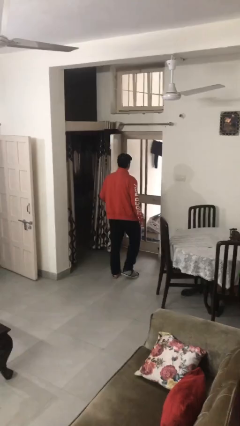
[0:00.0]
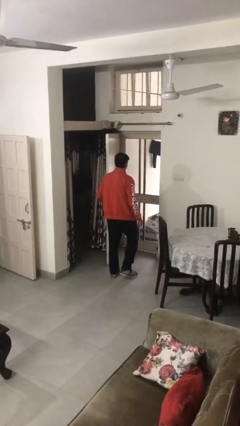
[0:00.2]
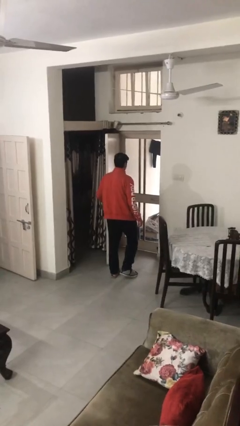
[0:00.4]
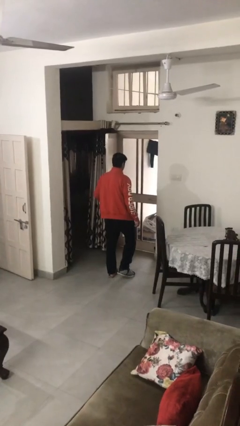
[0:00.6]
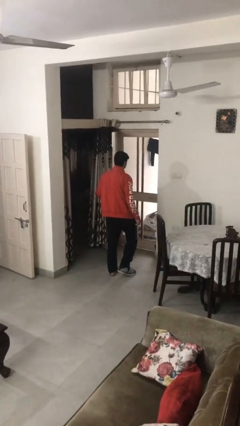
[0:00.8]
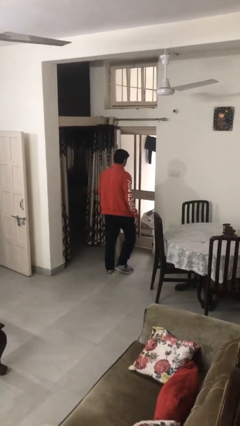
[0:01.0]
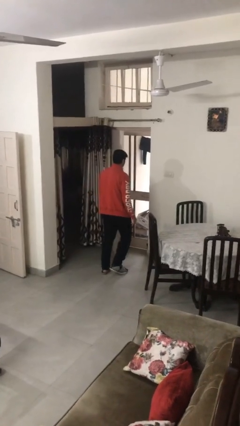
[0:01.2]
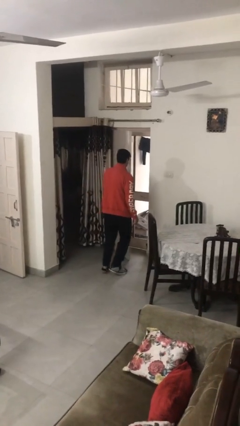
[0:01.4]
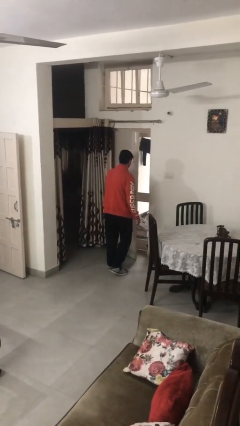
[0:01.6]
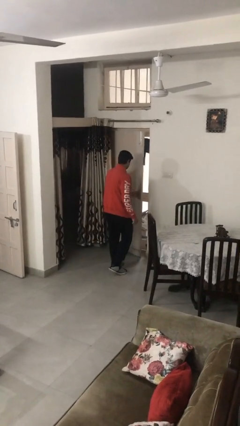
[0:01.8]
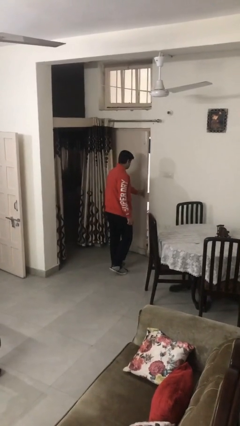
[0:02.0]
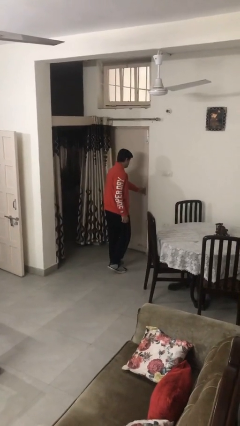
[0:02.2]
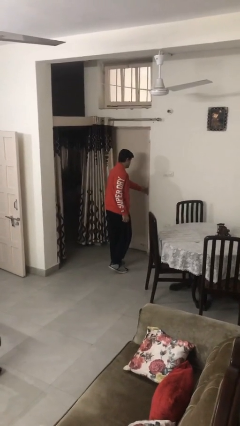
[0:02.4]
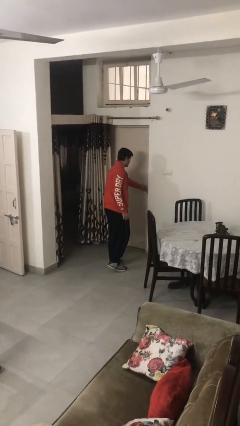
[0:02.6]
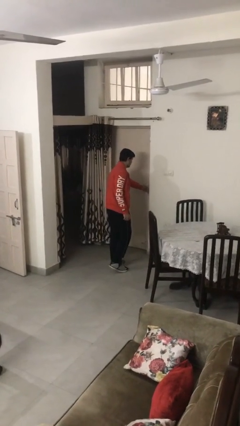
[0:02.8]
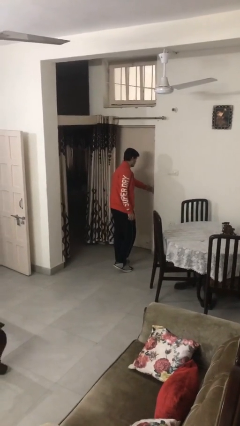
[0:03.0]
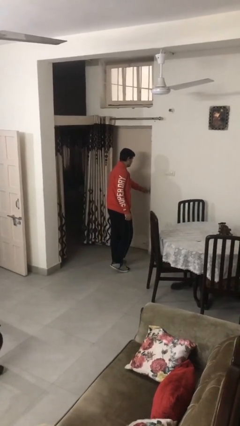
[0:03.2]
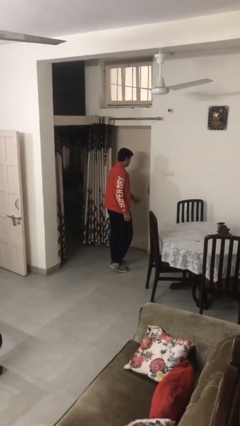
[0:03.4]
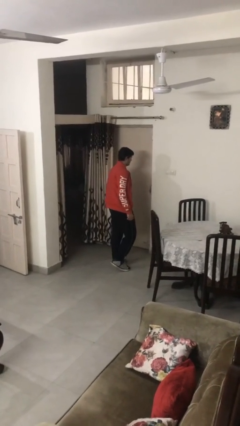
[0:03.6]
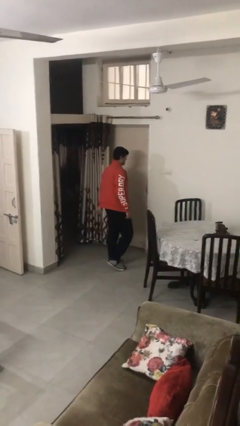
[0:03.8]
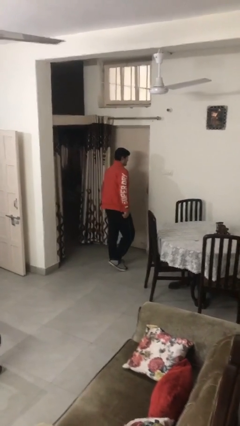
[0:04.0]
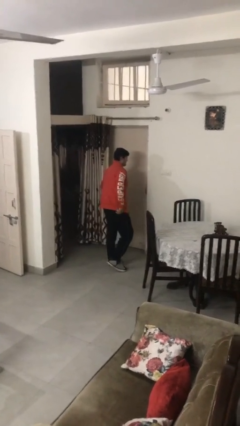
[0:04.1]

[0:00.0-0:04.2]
person closes facility door

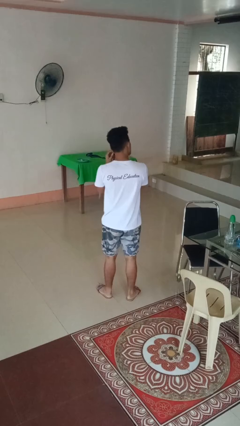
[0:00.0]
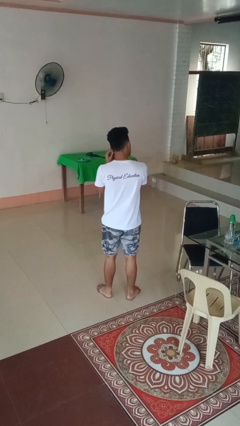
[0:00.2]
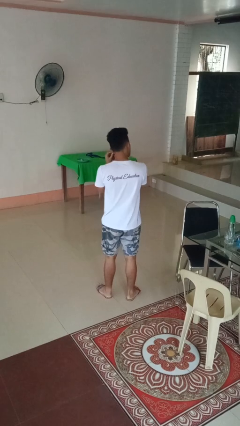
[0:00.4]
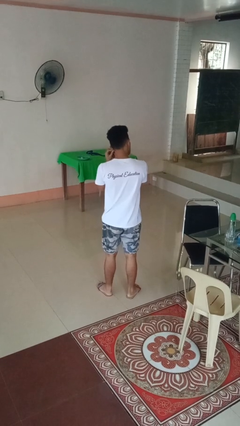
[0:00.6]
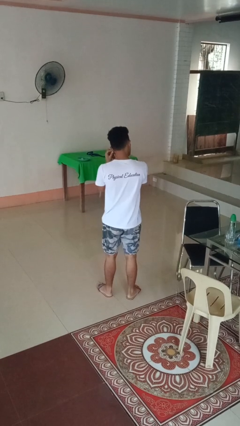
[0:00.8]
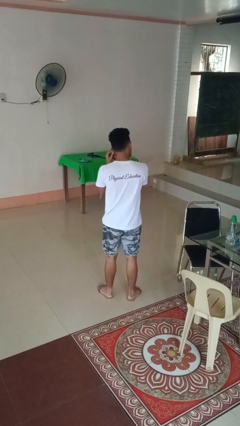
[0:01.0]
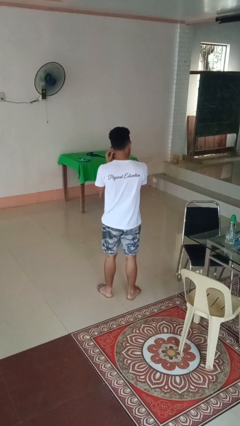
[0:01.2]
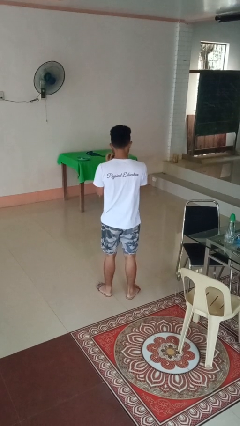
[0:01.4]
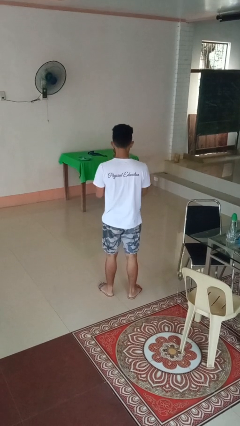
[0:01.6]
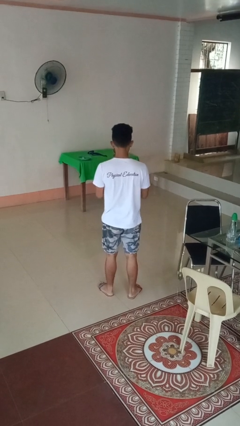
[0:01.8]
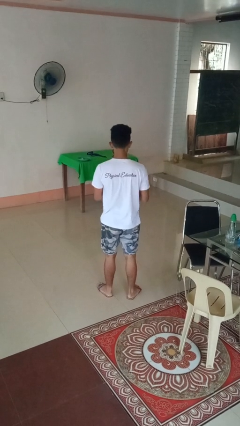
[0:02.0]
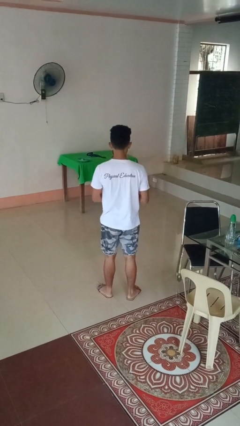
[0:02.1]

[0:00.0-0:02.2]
person takes off earrings

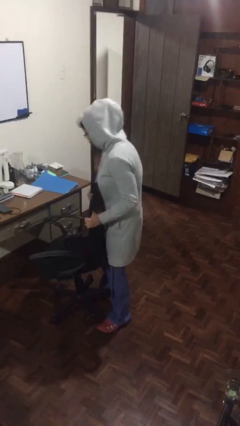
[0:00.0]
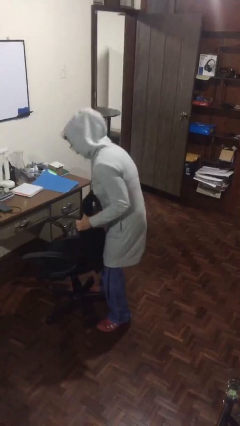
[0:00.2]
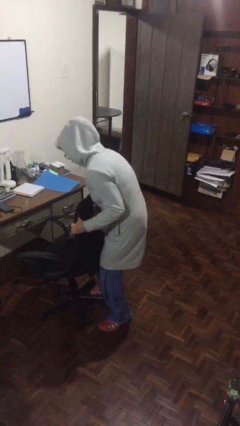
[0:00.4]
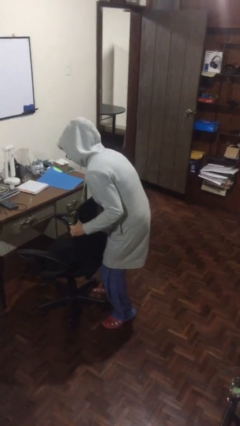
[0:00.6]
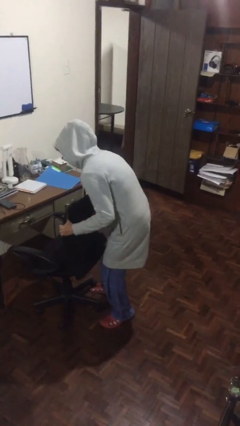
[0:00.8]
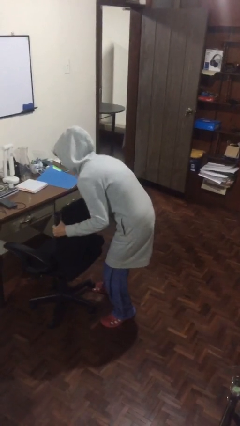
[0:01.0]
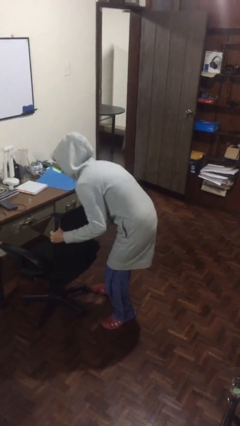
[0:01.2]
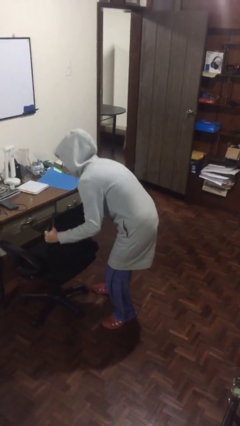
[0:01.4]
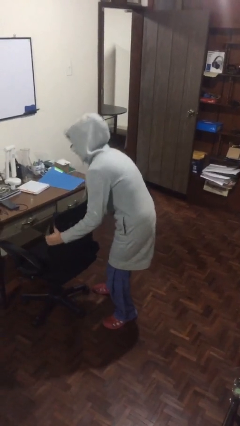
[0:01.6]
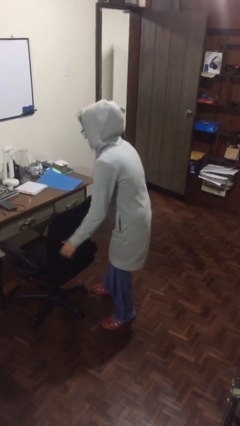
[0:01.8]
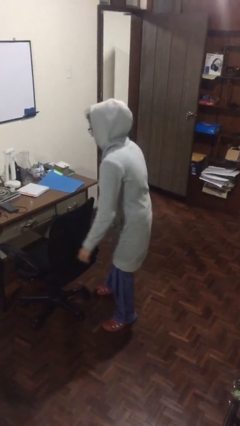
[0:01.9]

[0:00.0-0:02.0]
person puts down object on floor

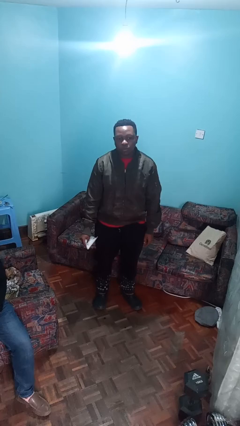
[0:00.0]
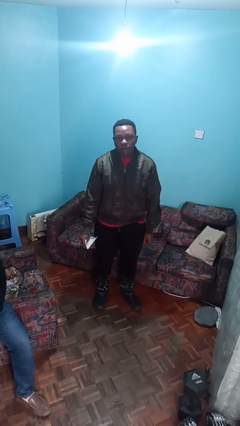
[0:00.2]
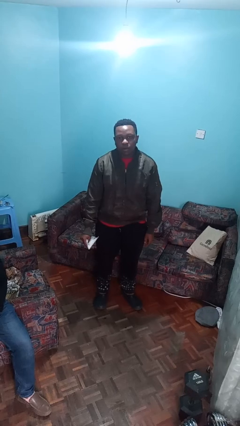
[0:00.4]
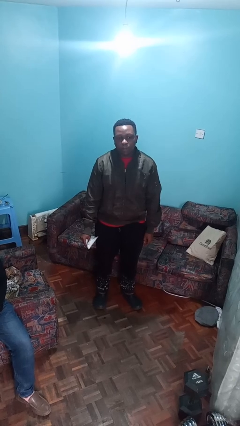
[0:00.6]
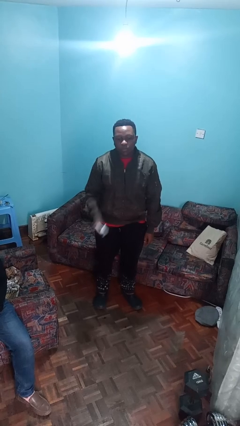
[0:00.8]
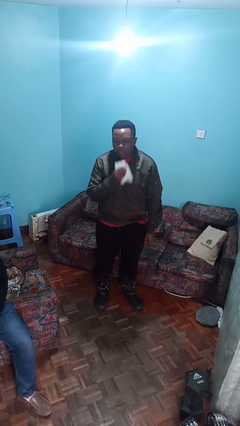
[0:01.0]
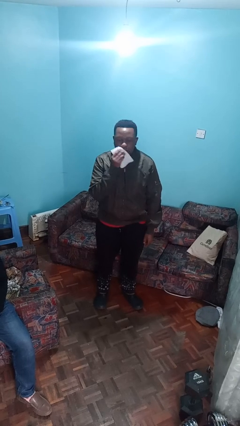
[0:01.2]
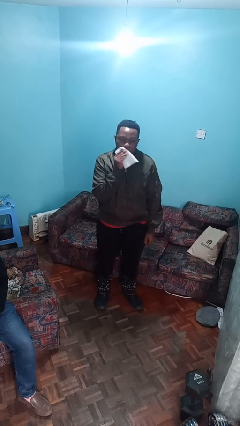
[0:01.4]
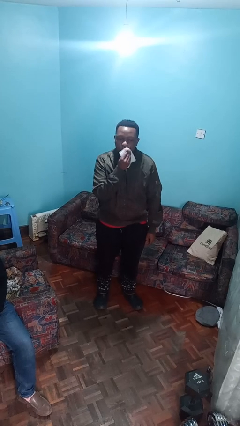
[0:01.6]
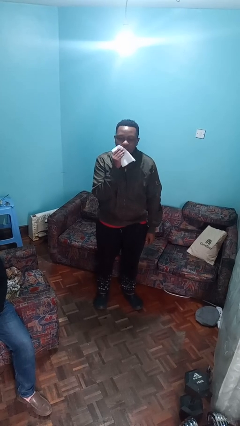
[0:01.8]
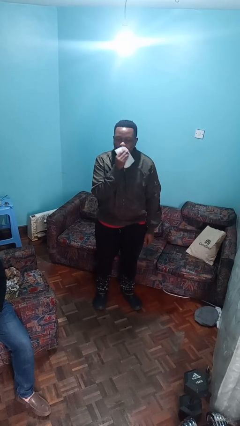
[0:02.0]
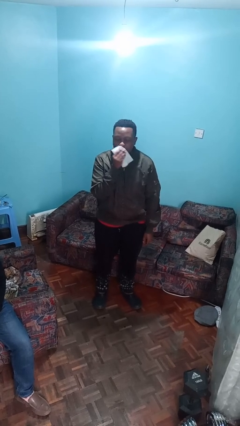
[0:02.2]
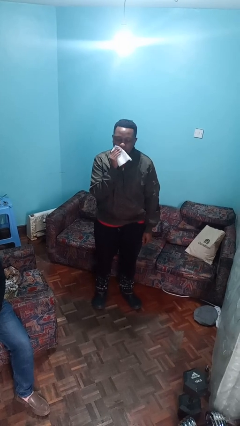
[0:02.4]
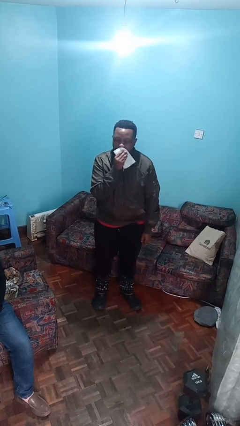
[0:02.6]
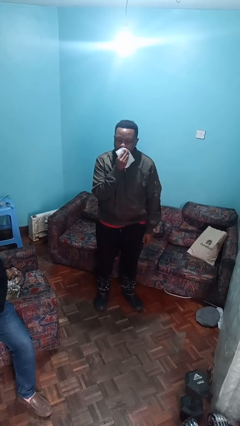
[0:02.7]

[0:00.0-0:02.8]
person wipes mouth with napkin

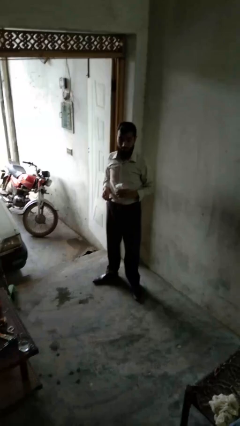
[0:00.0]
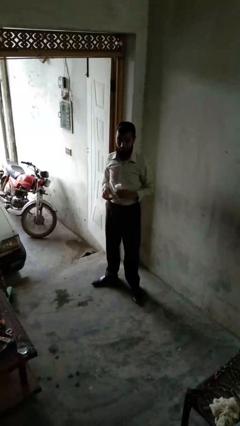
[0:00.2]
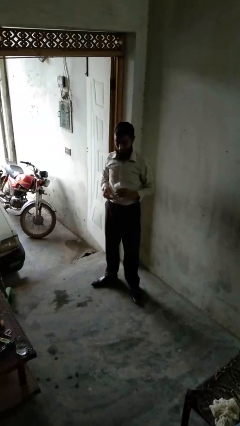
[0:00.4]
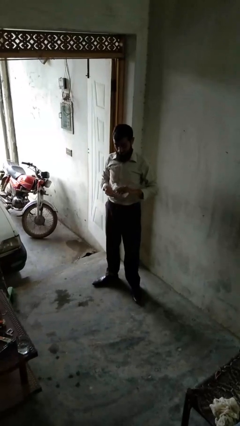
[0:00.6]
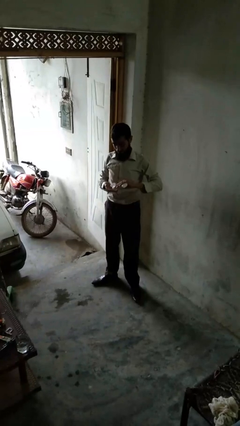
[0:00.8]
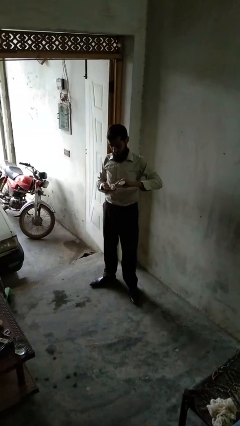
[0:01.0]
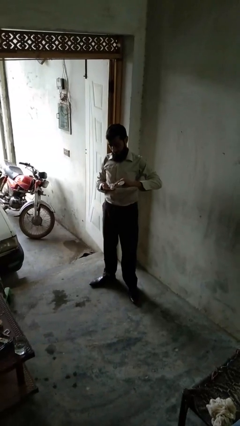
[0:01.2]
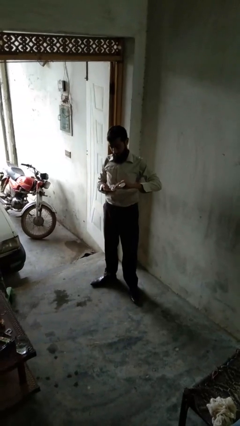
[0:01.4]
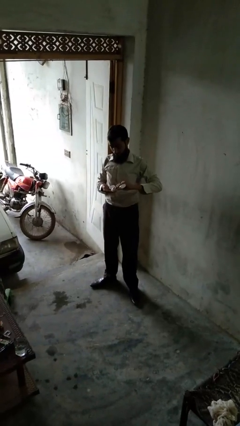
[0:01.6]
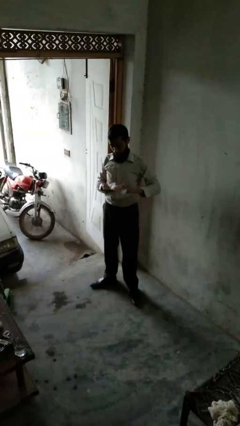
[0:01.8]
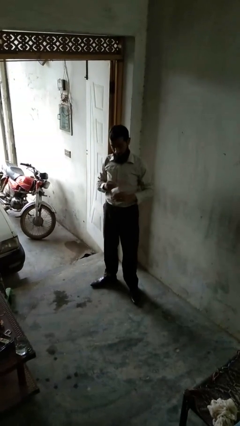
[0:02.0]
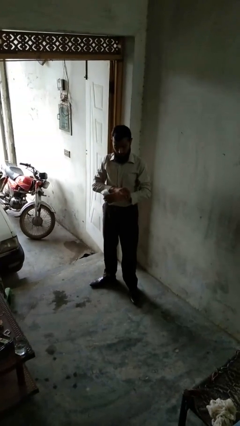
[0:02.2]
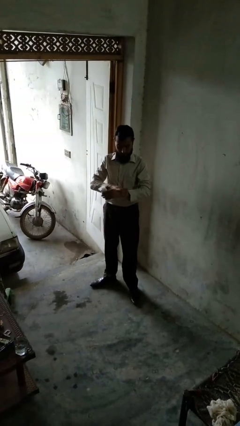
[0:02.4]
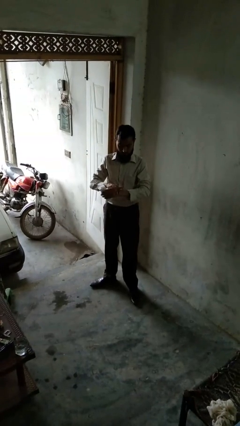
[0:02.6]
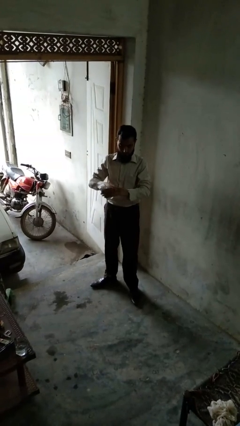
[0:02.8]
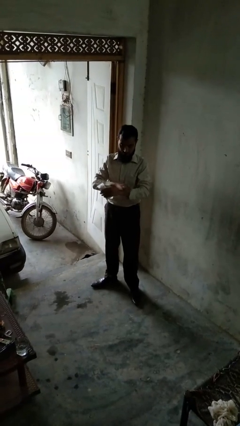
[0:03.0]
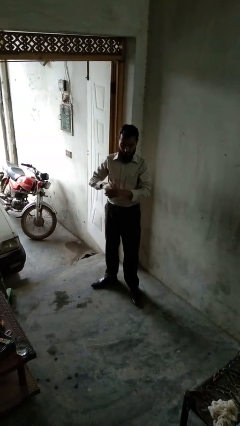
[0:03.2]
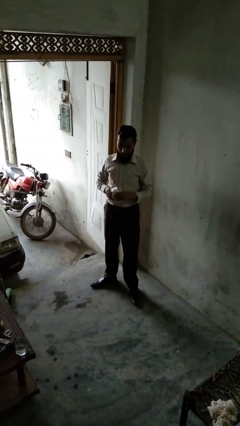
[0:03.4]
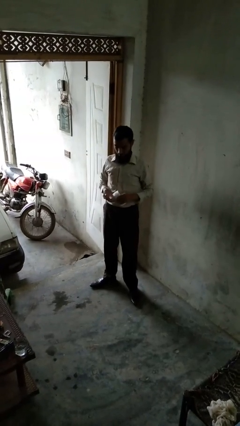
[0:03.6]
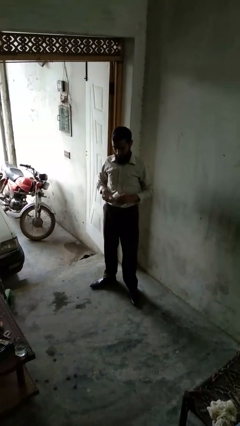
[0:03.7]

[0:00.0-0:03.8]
person applies sunscreen

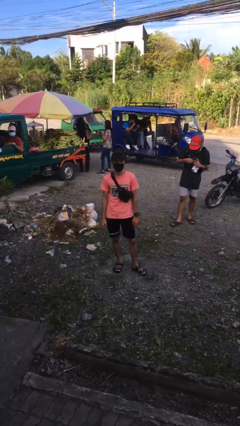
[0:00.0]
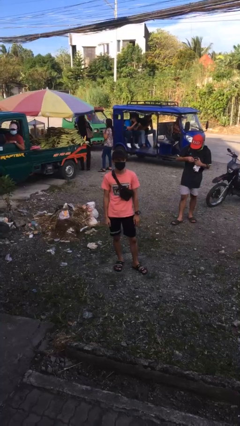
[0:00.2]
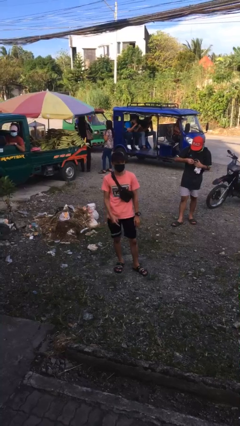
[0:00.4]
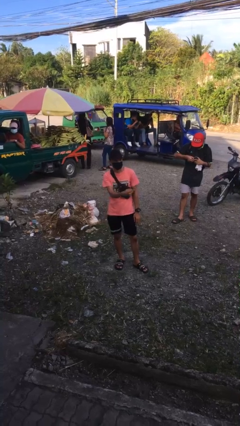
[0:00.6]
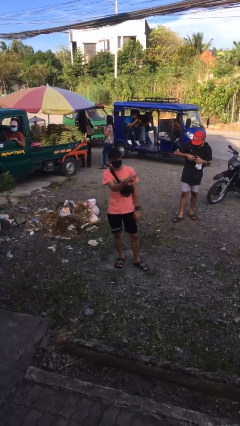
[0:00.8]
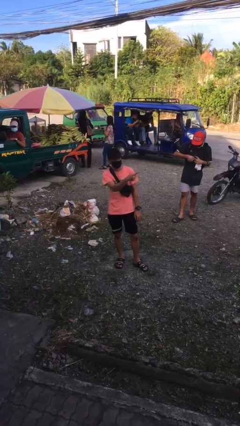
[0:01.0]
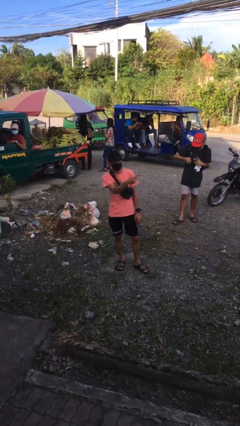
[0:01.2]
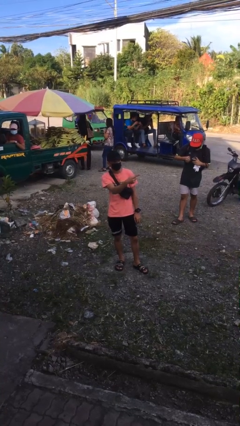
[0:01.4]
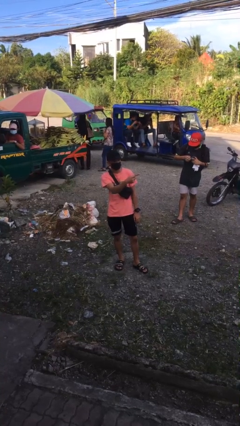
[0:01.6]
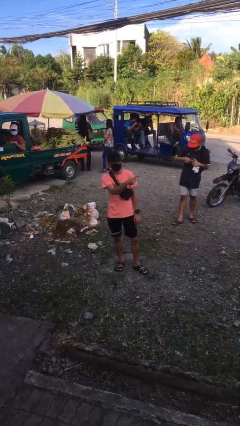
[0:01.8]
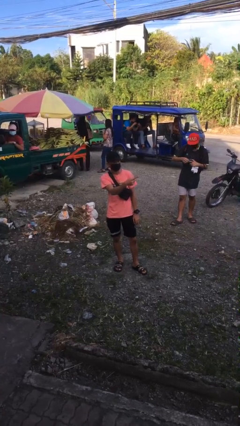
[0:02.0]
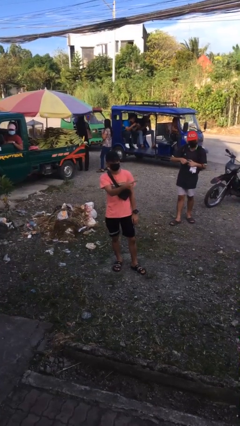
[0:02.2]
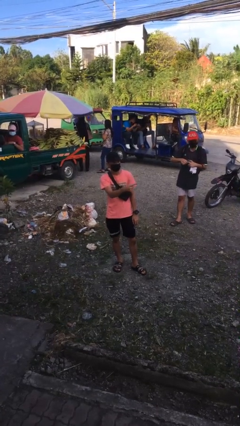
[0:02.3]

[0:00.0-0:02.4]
person points at person
